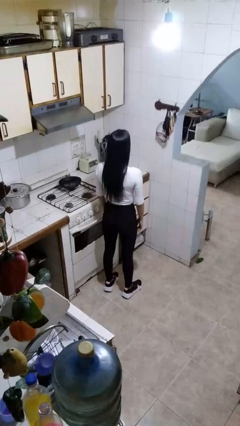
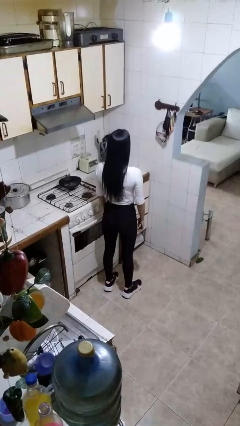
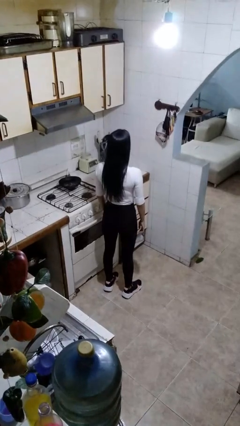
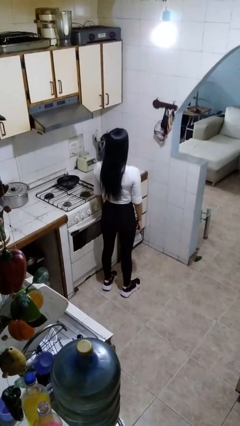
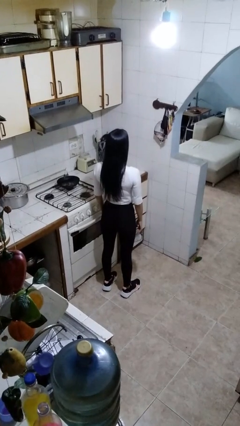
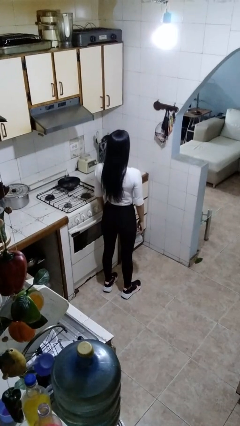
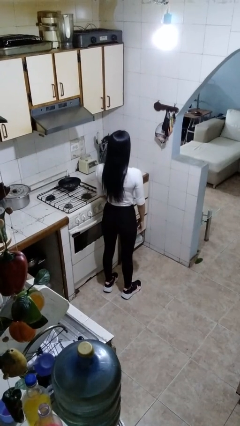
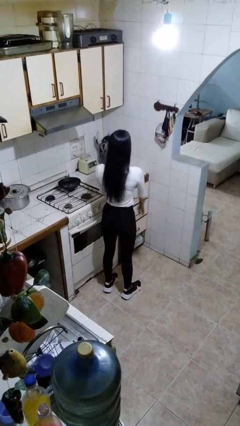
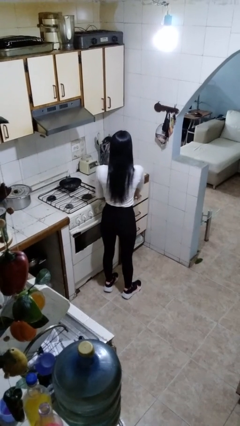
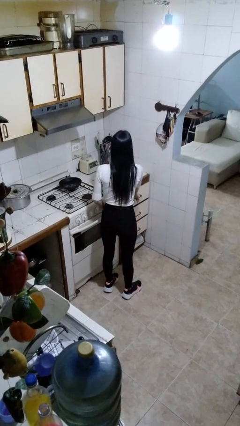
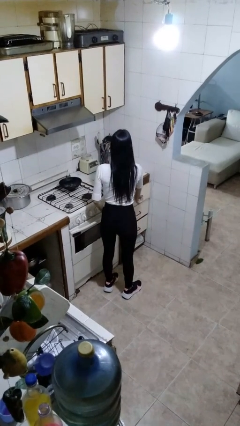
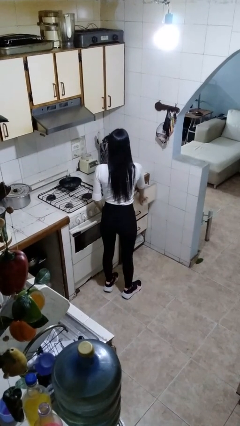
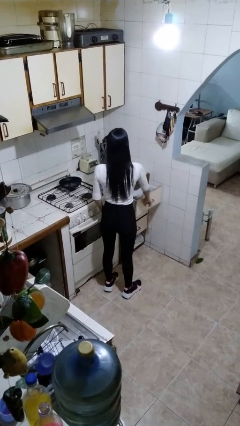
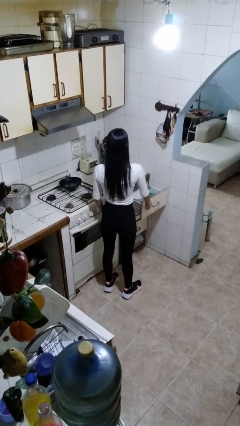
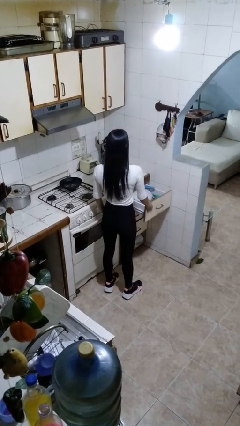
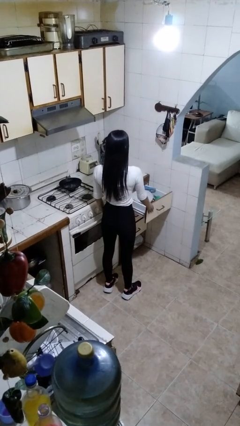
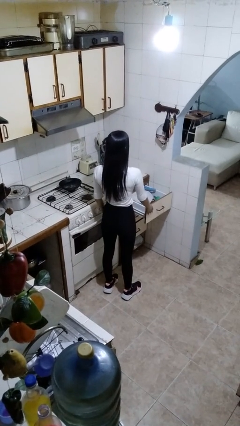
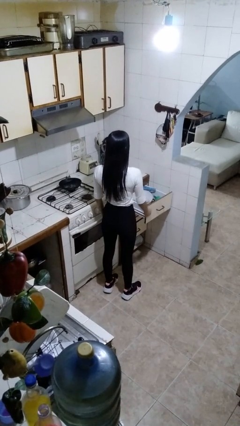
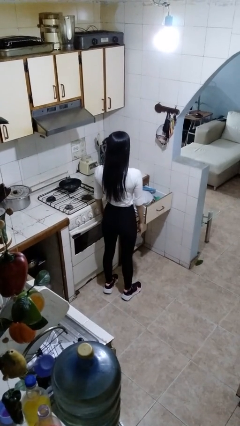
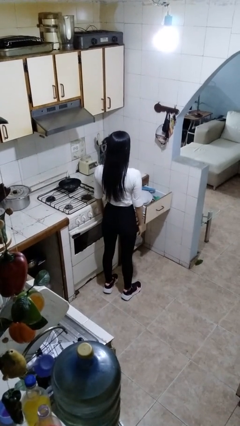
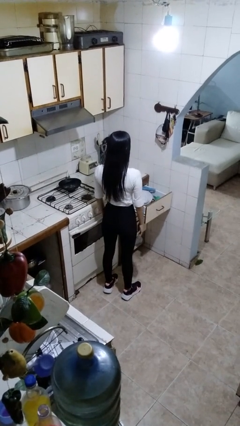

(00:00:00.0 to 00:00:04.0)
person opens kitchen drawer

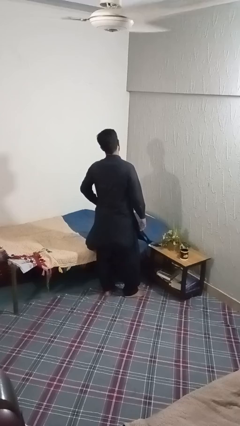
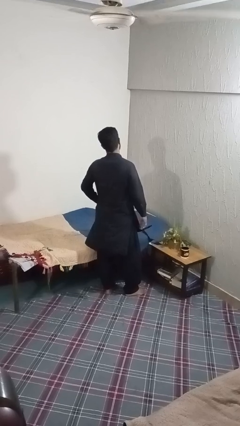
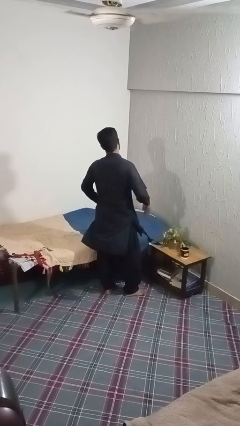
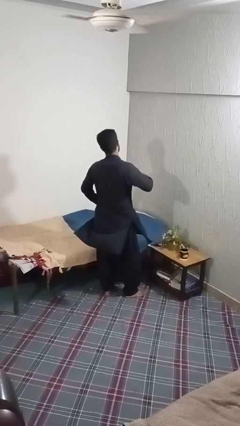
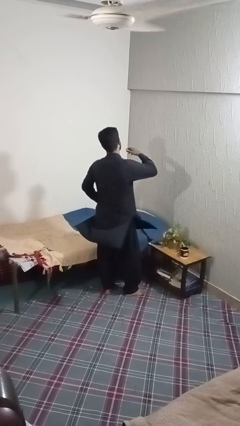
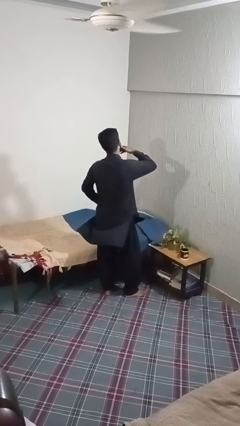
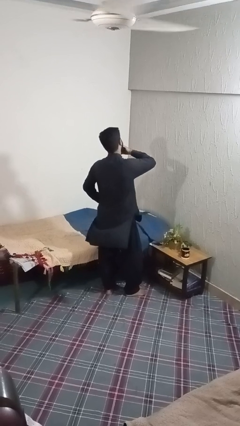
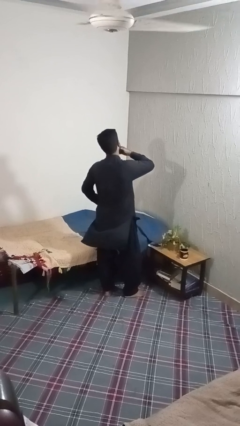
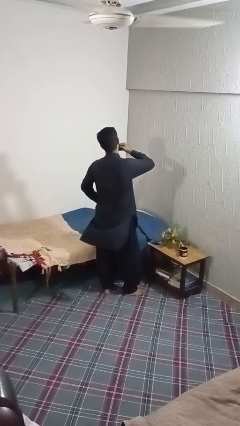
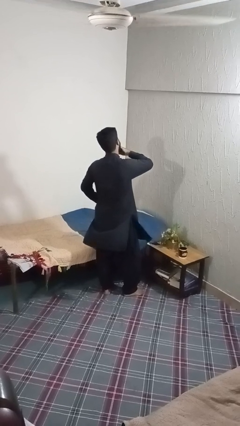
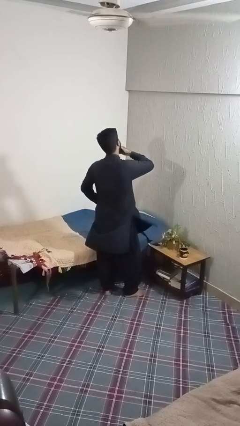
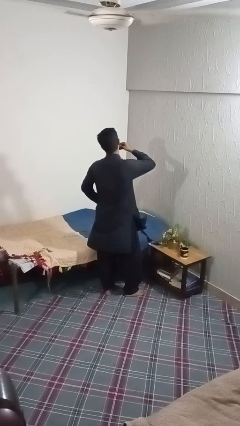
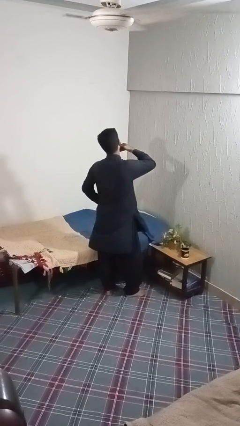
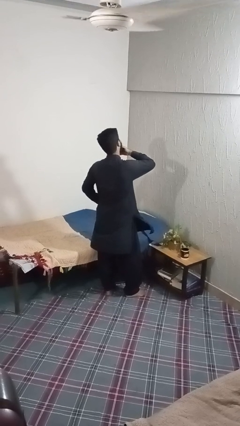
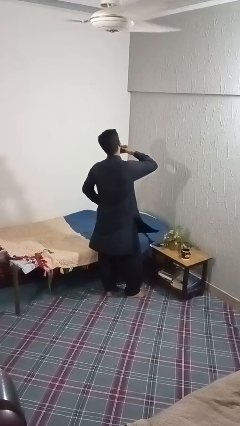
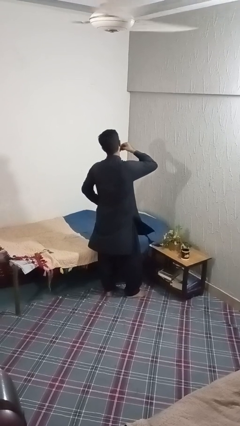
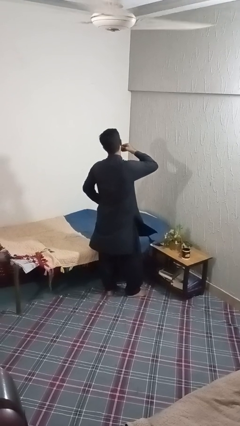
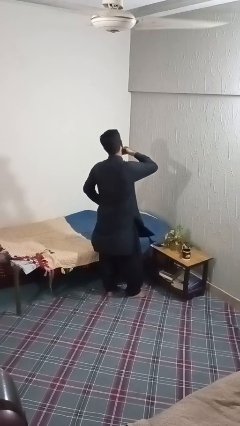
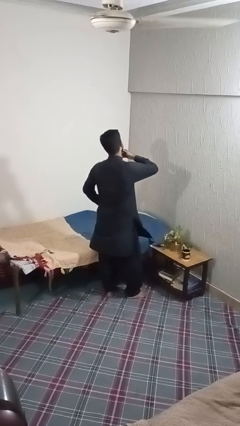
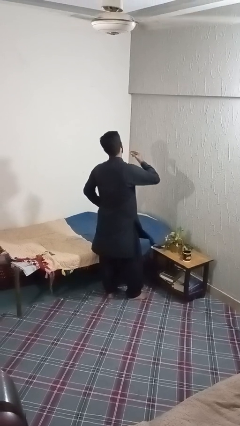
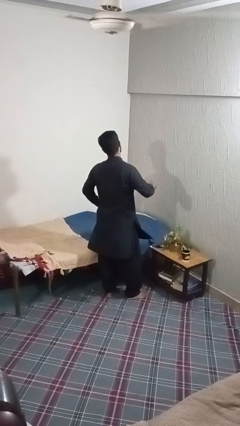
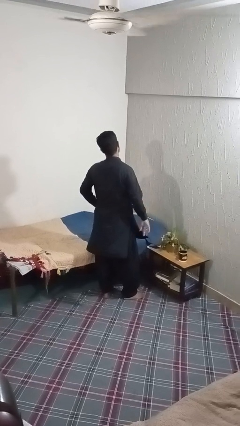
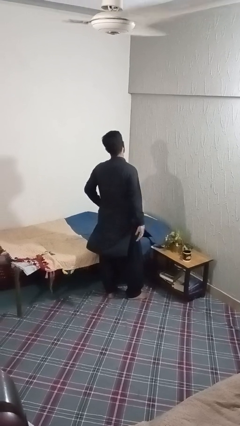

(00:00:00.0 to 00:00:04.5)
person strokes chin

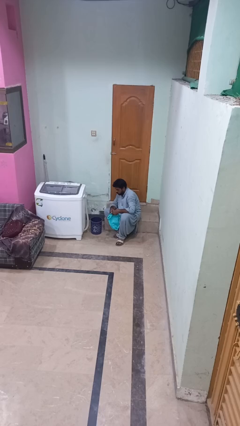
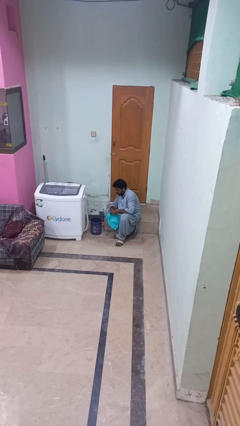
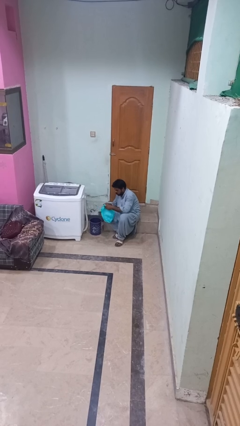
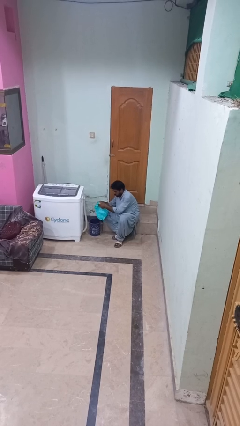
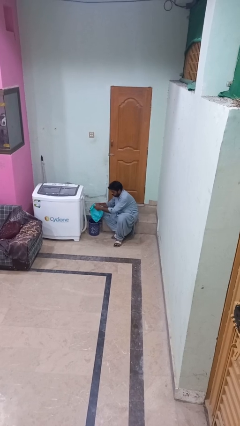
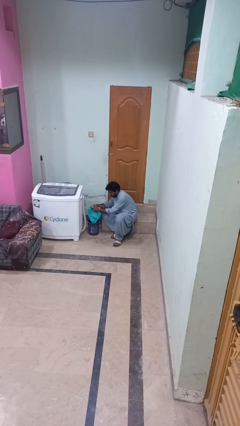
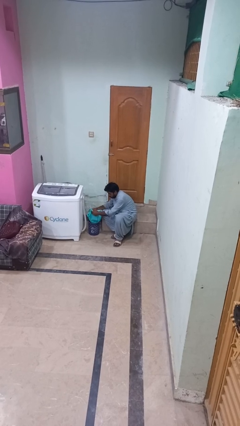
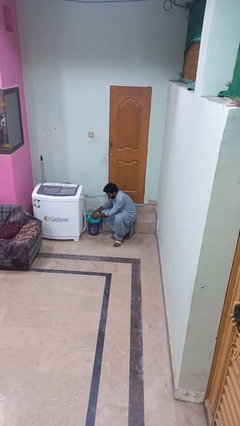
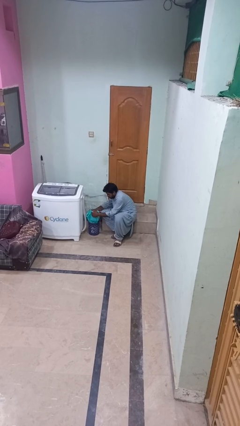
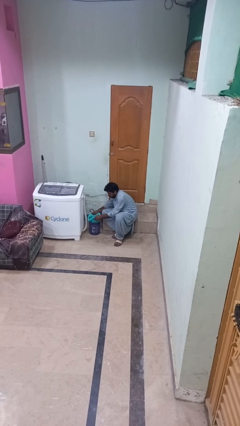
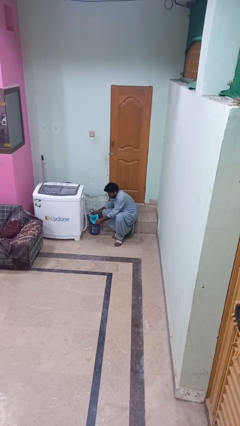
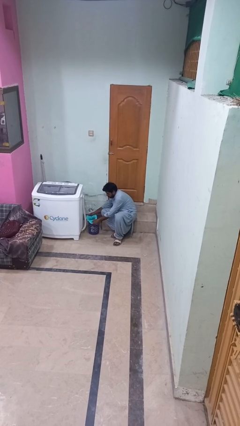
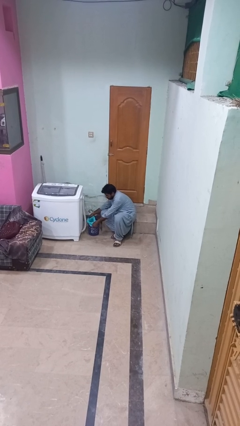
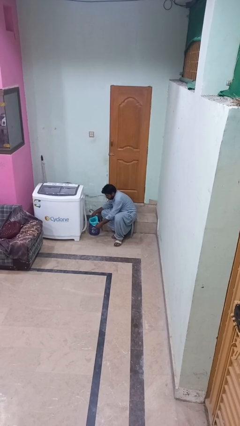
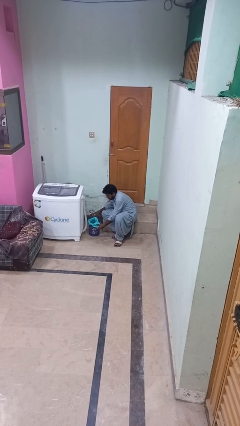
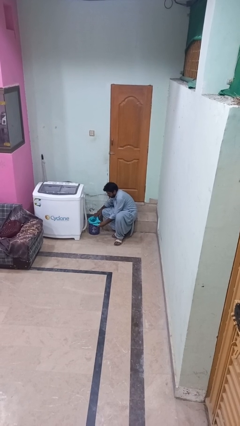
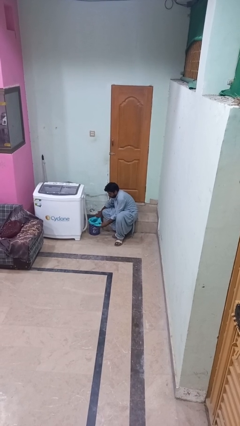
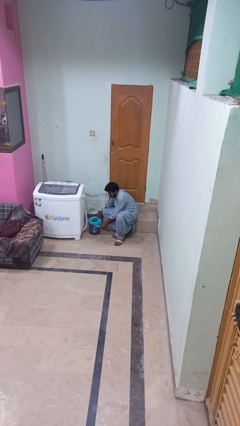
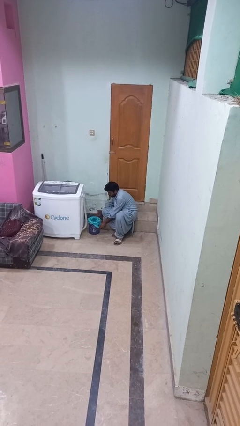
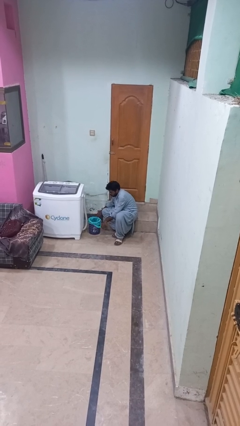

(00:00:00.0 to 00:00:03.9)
person inserts trashbag into trashcan

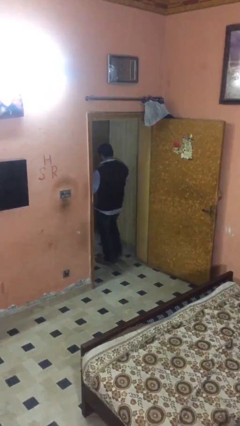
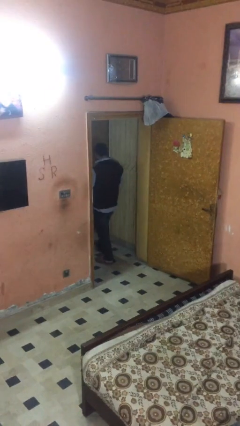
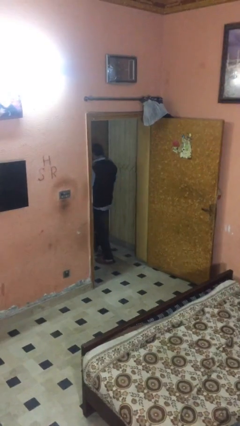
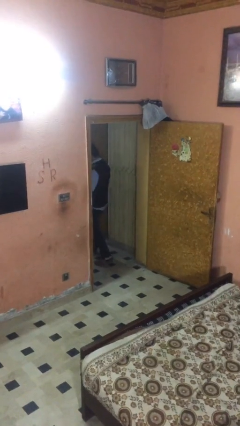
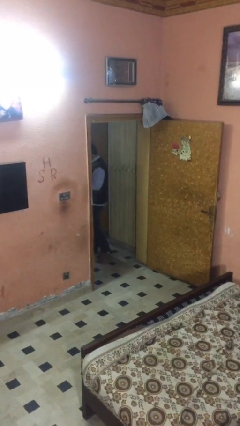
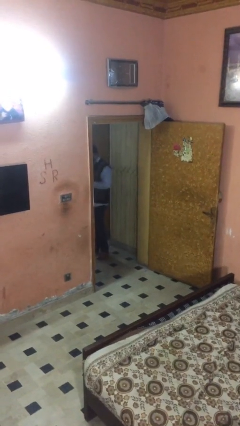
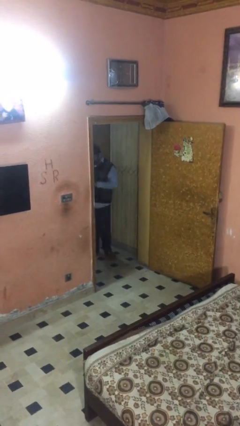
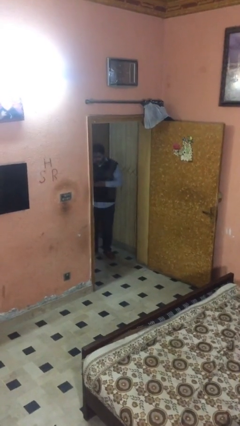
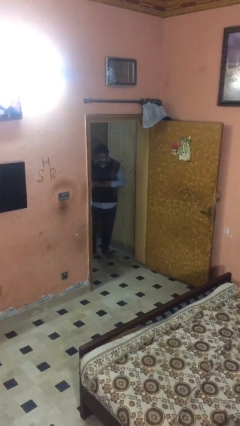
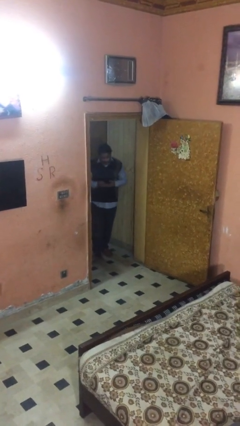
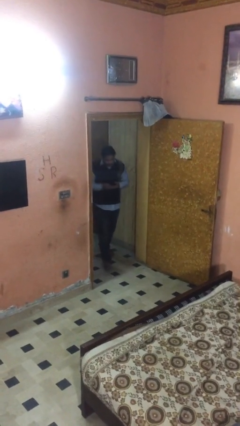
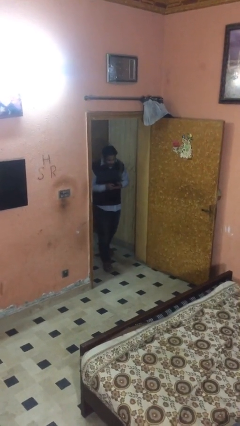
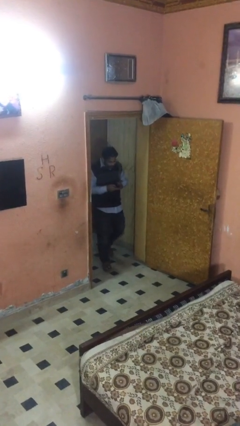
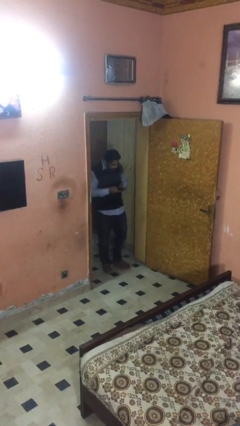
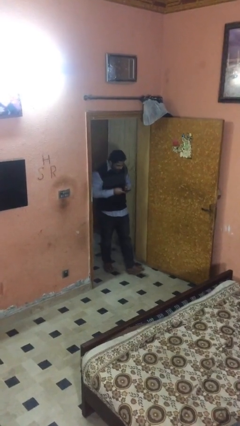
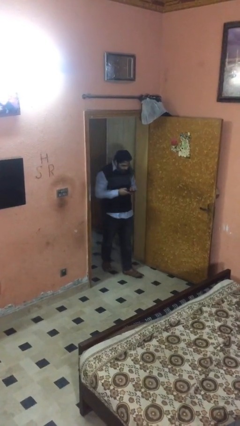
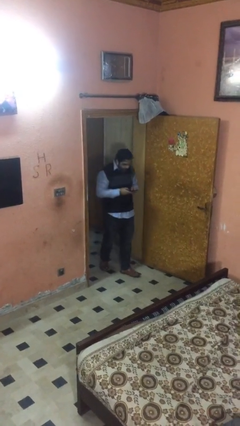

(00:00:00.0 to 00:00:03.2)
person enters scene through structure

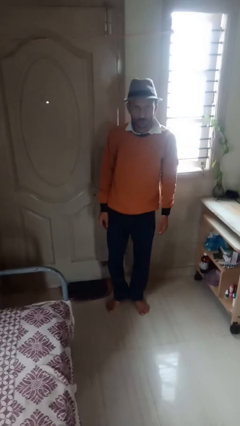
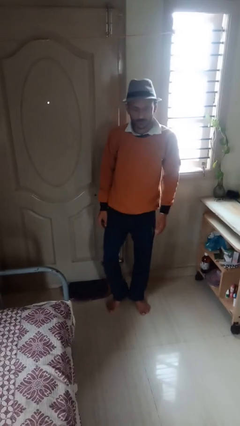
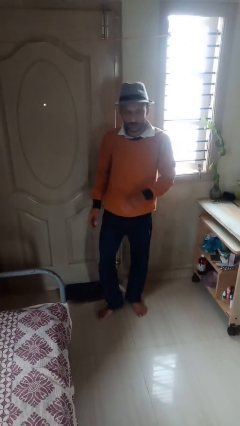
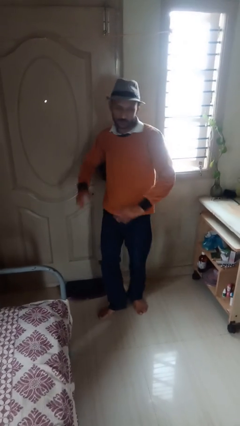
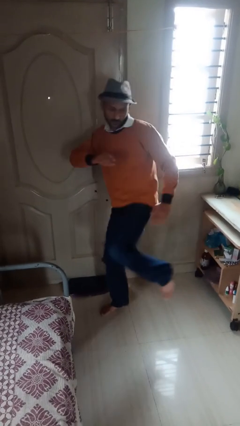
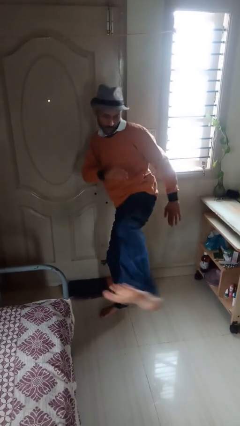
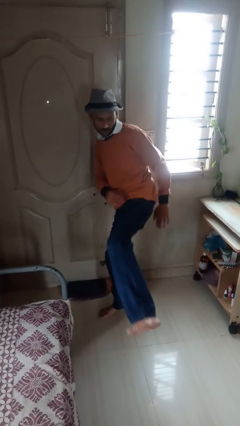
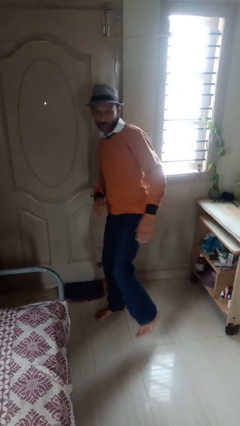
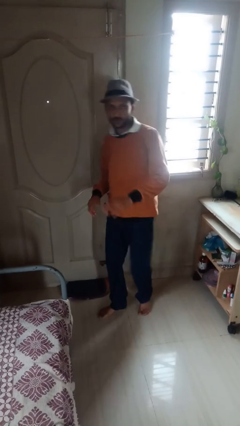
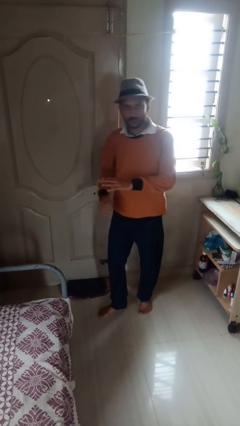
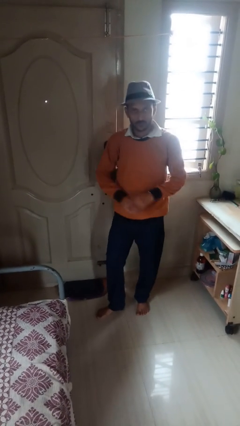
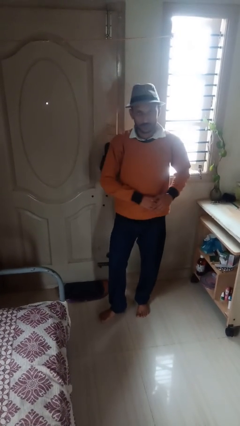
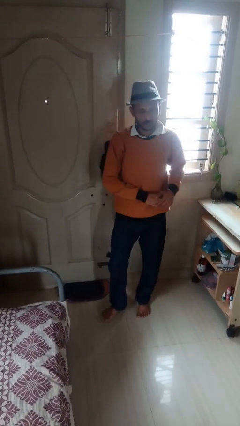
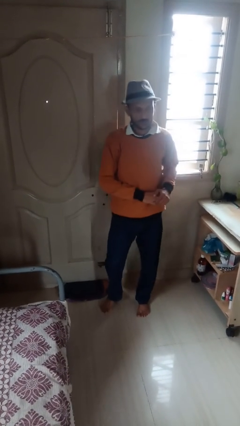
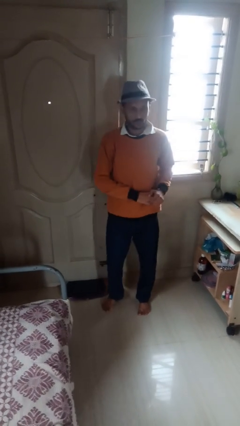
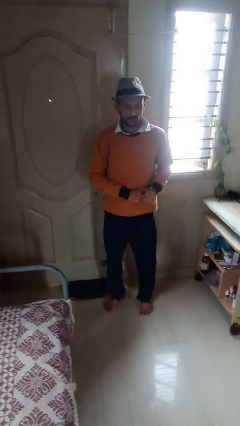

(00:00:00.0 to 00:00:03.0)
person karate kicks
